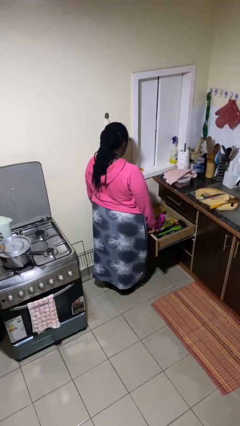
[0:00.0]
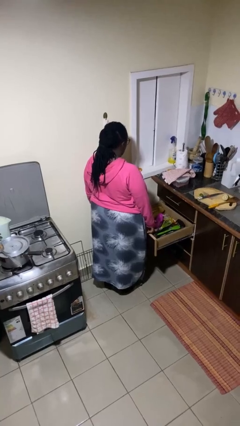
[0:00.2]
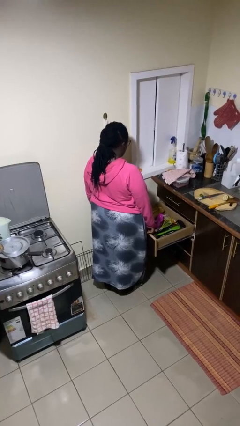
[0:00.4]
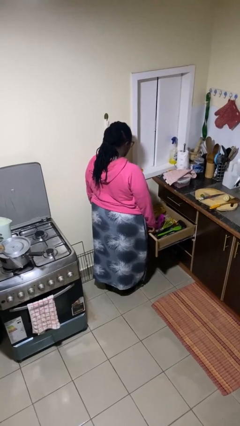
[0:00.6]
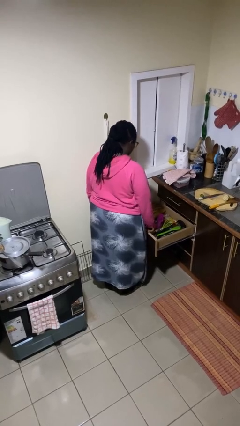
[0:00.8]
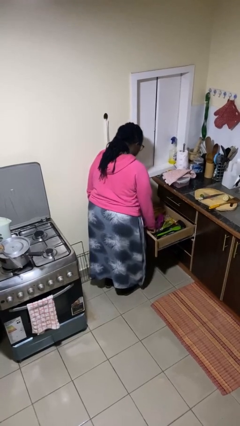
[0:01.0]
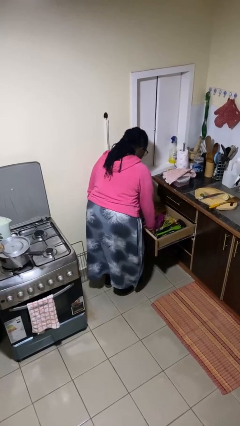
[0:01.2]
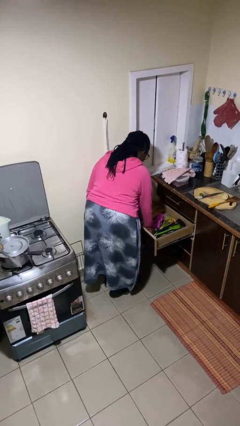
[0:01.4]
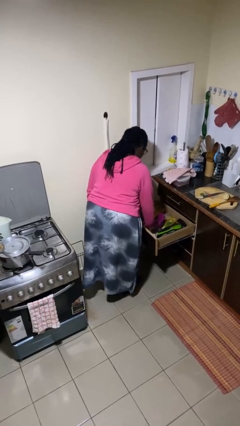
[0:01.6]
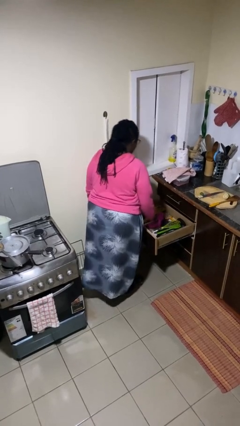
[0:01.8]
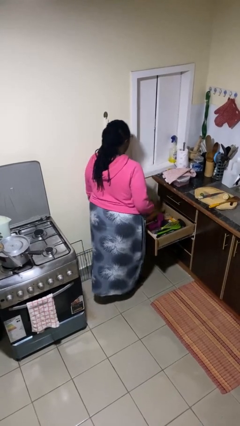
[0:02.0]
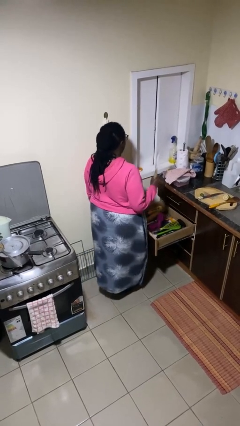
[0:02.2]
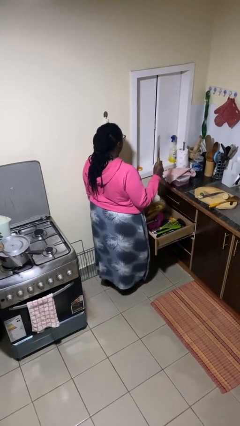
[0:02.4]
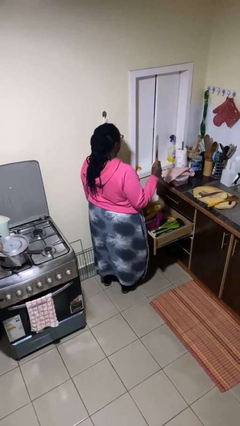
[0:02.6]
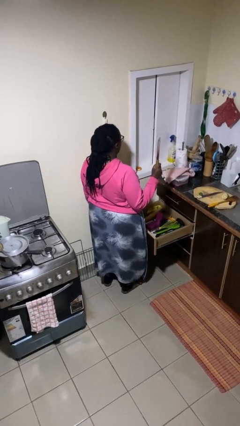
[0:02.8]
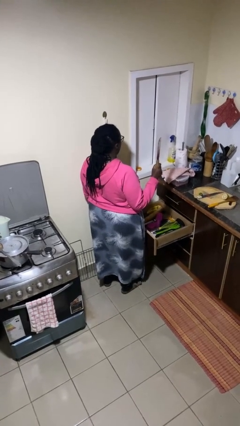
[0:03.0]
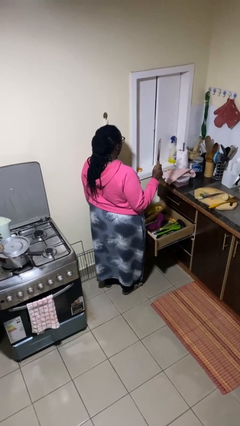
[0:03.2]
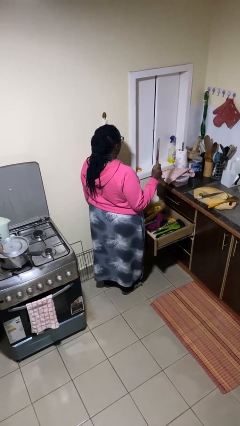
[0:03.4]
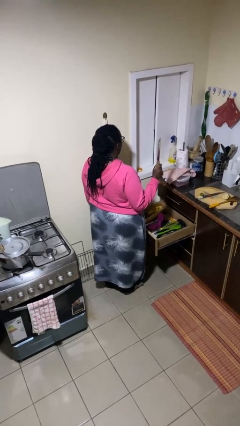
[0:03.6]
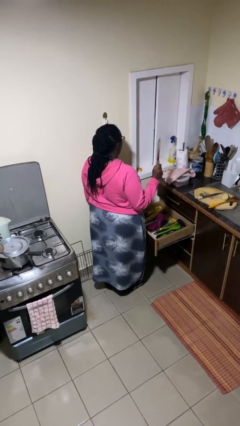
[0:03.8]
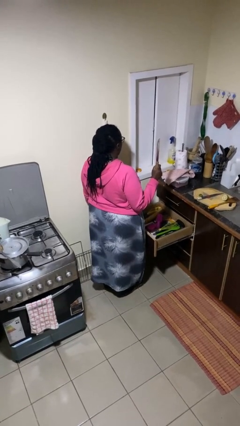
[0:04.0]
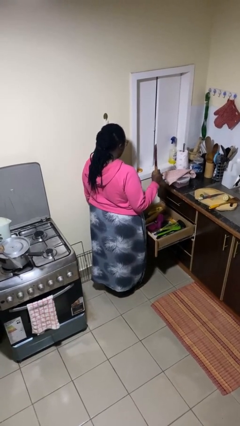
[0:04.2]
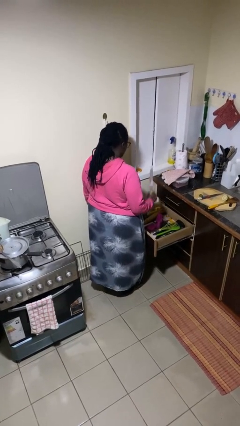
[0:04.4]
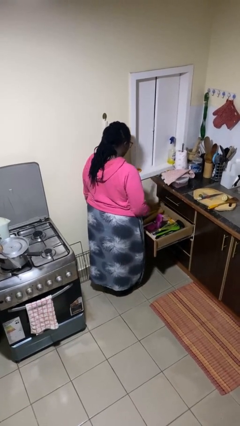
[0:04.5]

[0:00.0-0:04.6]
person takes object from kitchen drawer

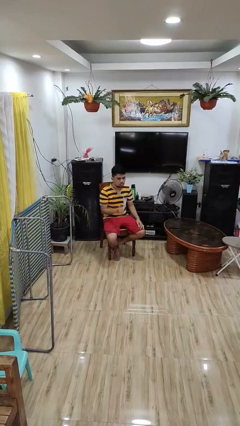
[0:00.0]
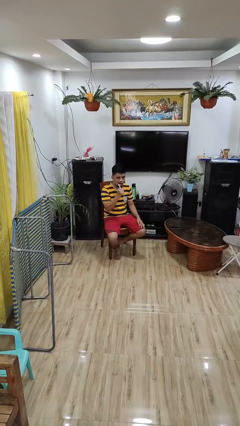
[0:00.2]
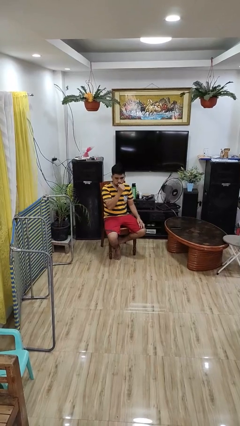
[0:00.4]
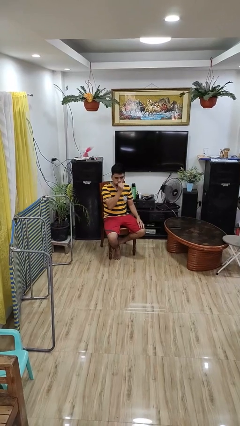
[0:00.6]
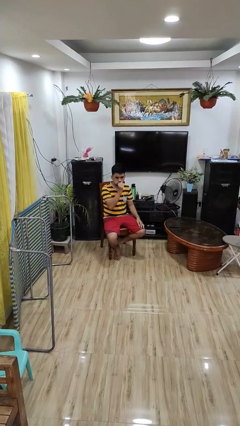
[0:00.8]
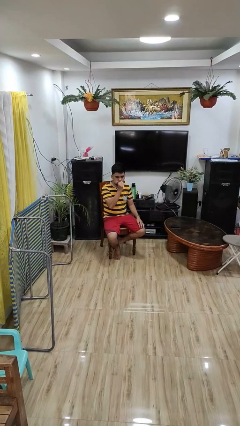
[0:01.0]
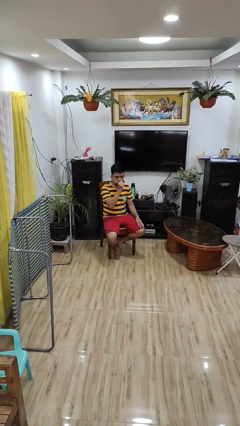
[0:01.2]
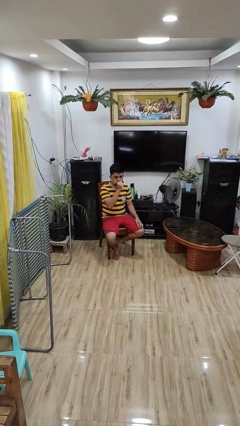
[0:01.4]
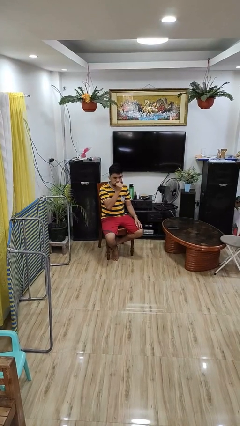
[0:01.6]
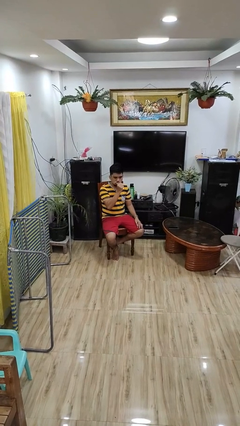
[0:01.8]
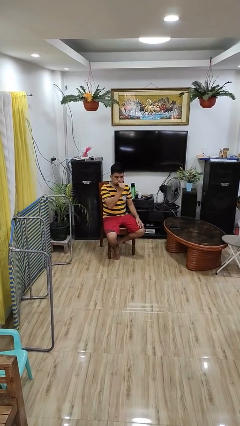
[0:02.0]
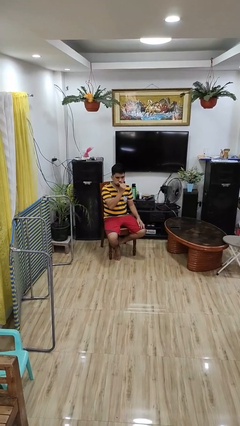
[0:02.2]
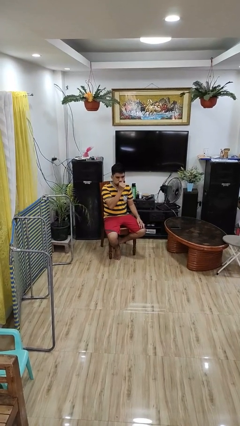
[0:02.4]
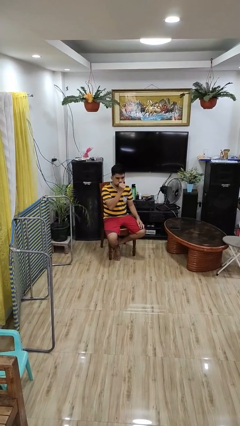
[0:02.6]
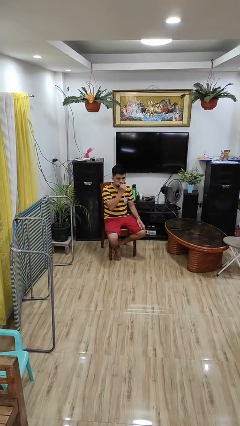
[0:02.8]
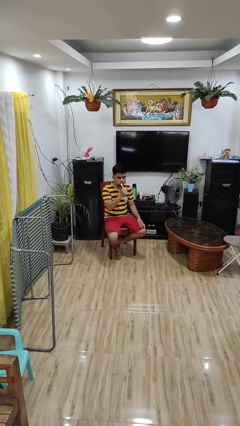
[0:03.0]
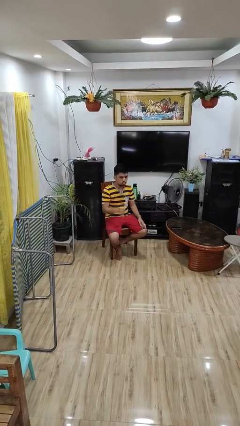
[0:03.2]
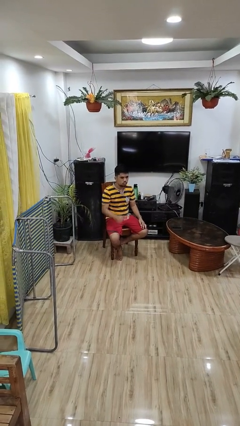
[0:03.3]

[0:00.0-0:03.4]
person brushes teeth

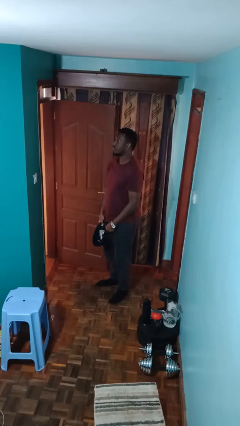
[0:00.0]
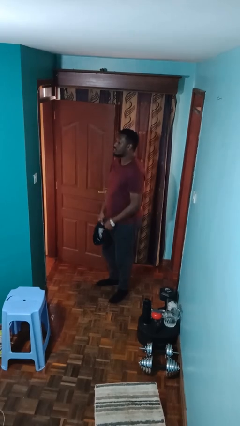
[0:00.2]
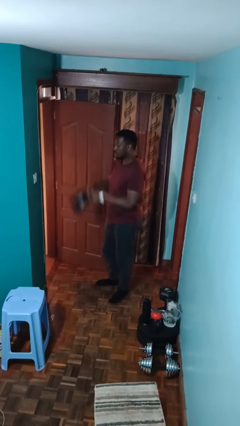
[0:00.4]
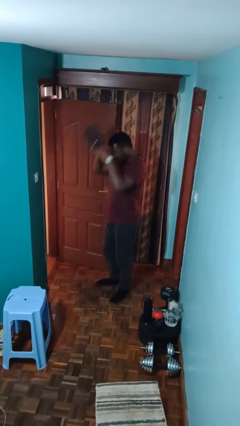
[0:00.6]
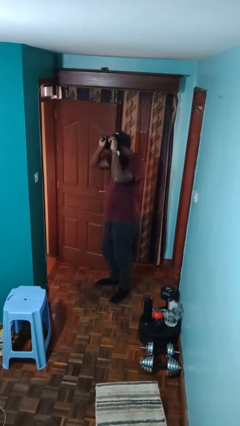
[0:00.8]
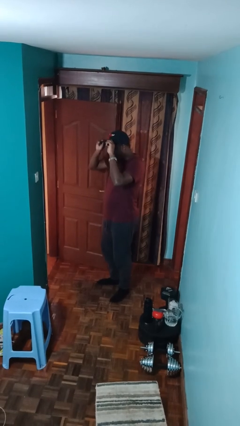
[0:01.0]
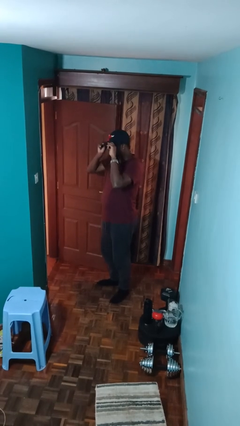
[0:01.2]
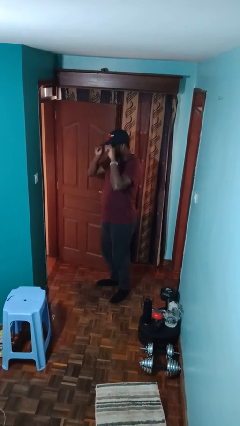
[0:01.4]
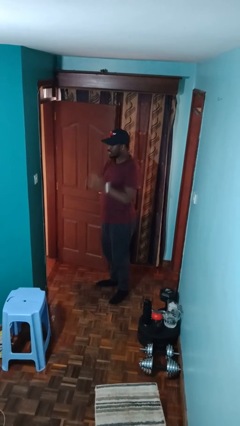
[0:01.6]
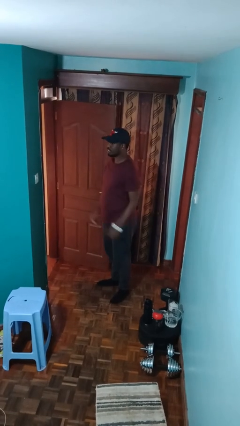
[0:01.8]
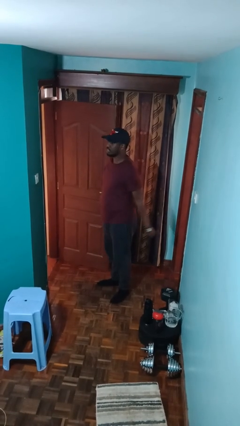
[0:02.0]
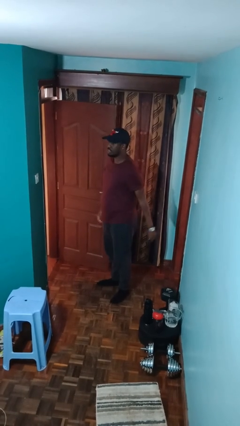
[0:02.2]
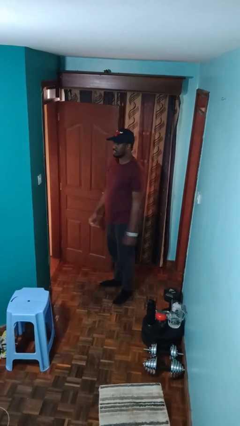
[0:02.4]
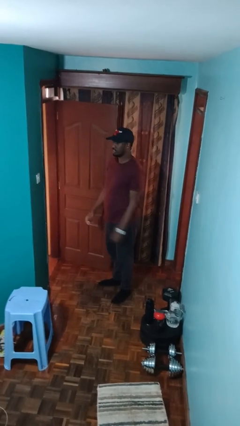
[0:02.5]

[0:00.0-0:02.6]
person puts on hat

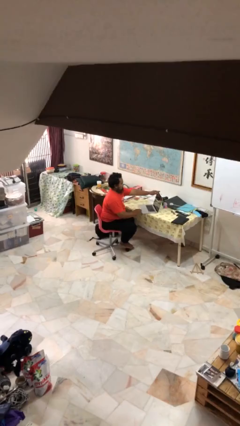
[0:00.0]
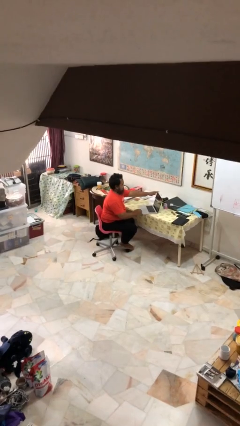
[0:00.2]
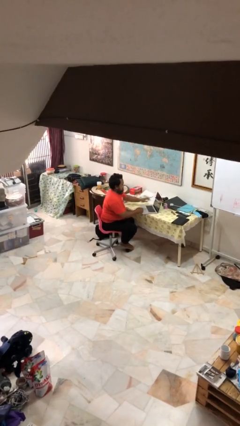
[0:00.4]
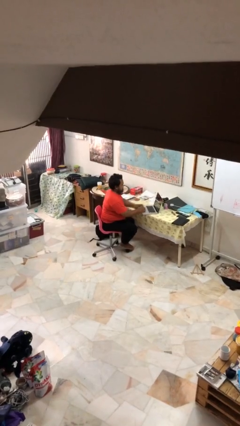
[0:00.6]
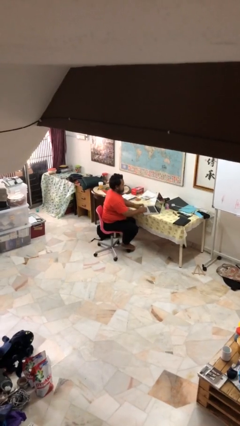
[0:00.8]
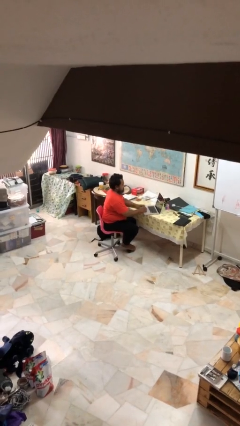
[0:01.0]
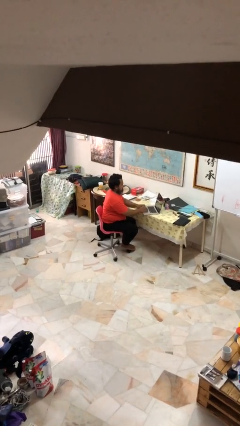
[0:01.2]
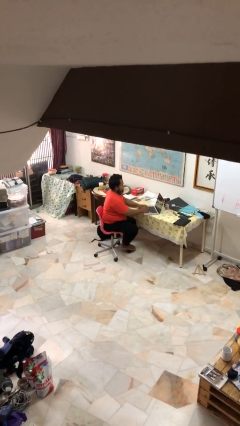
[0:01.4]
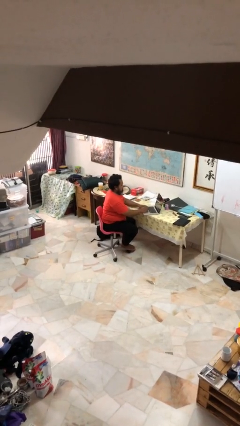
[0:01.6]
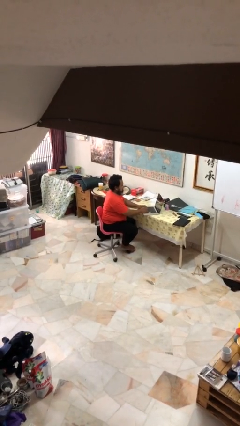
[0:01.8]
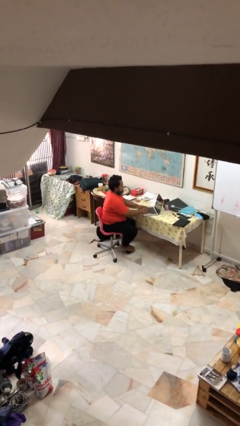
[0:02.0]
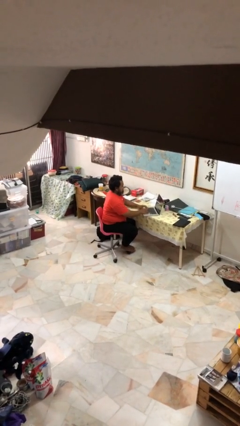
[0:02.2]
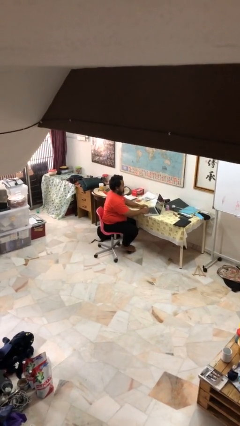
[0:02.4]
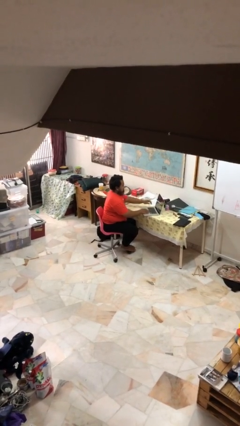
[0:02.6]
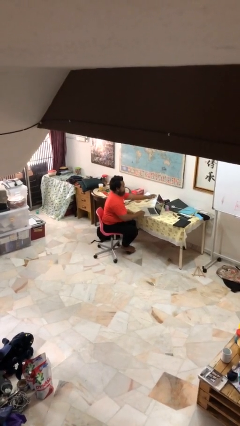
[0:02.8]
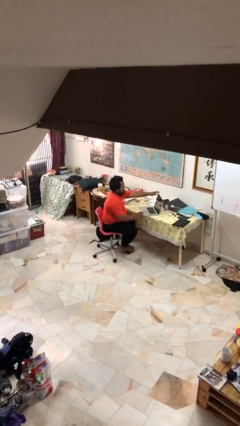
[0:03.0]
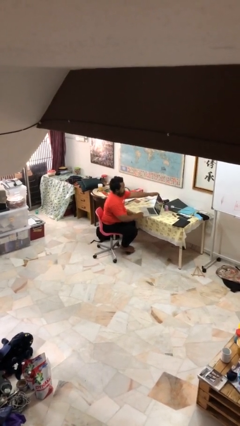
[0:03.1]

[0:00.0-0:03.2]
person interacts with laptop

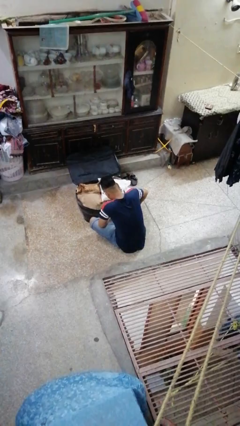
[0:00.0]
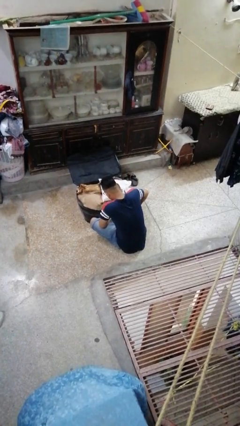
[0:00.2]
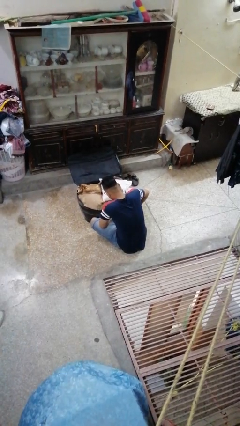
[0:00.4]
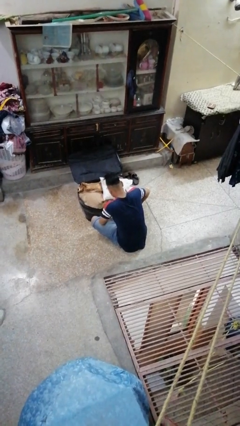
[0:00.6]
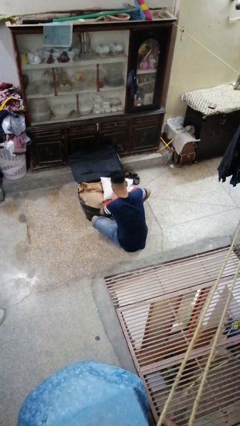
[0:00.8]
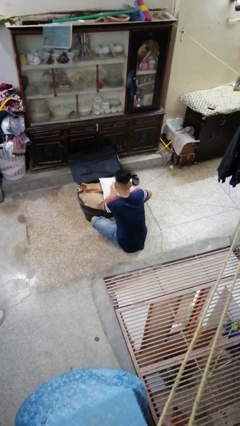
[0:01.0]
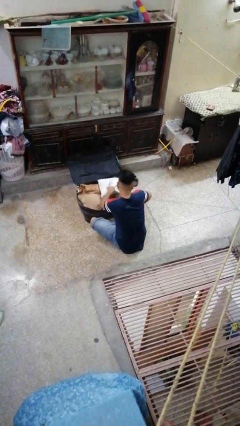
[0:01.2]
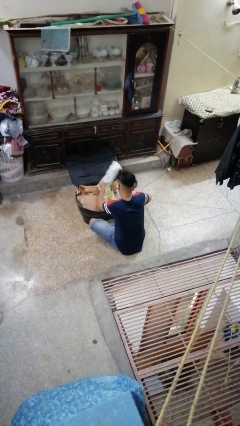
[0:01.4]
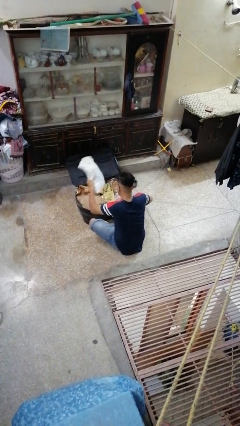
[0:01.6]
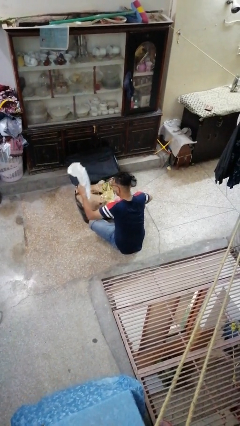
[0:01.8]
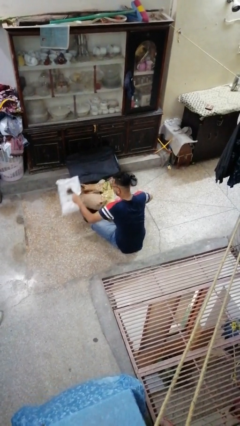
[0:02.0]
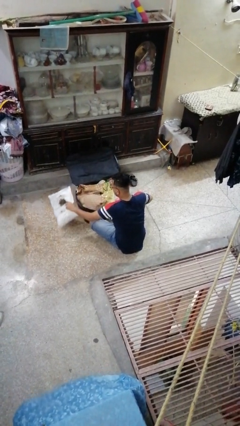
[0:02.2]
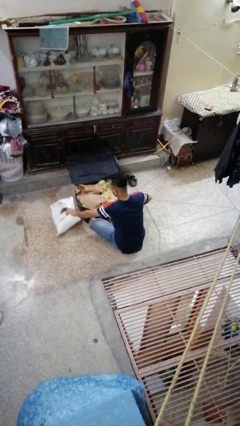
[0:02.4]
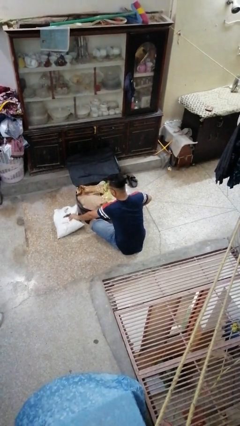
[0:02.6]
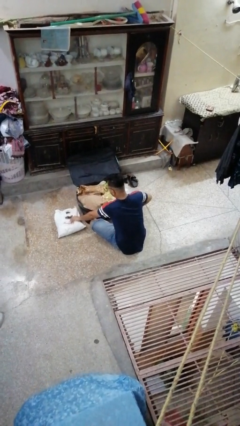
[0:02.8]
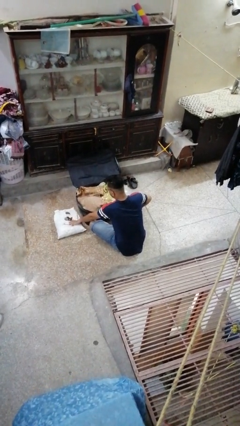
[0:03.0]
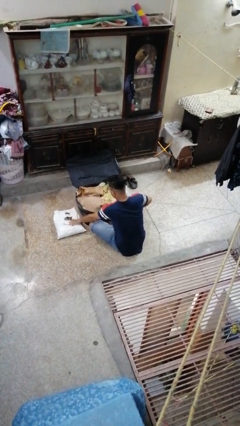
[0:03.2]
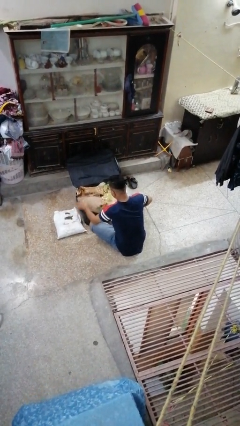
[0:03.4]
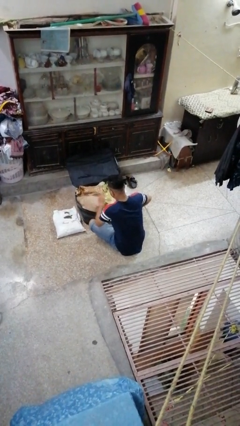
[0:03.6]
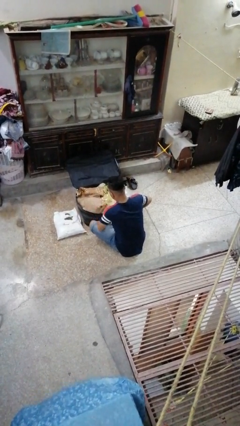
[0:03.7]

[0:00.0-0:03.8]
person unloads clothes from suitcase
